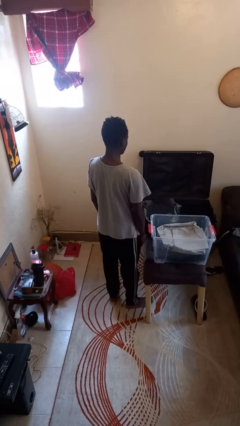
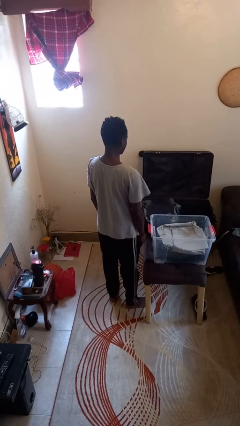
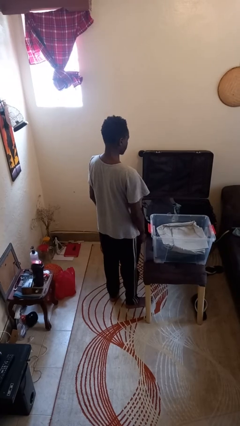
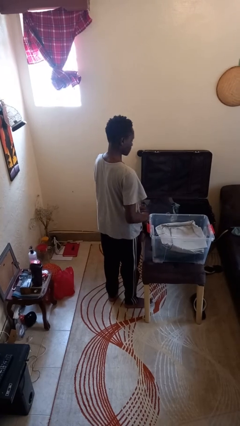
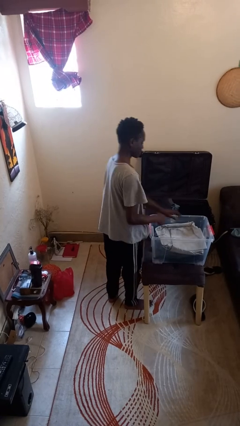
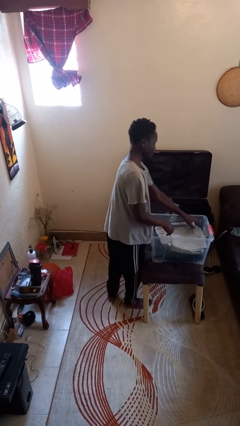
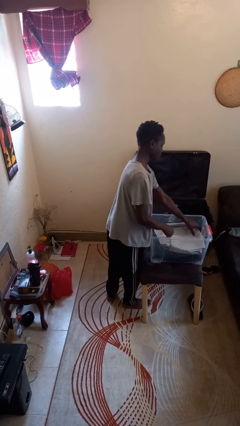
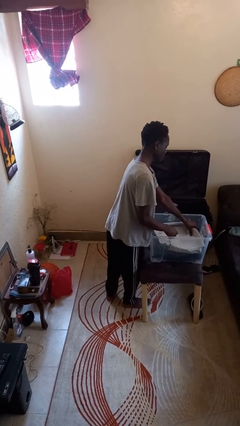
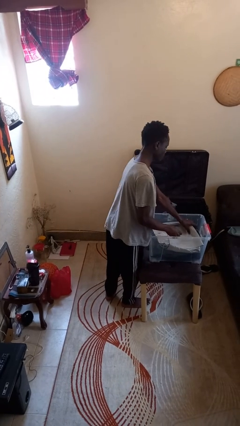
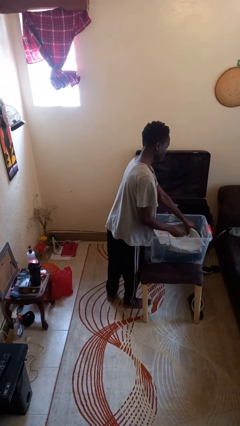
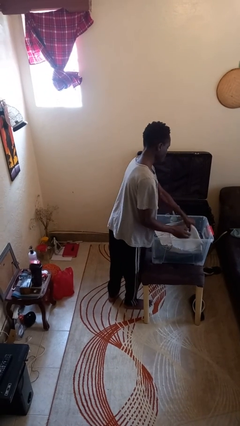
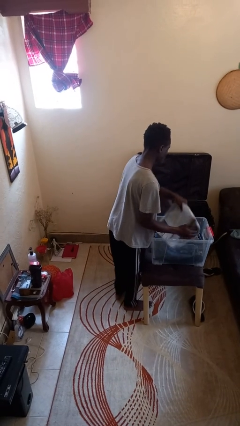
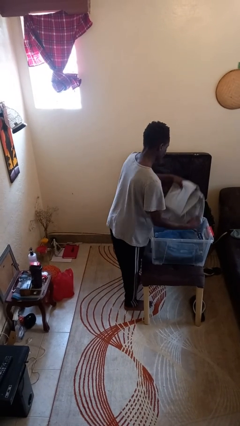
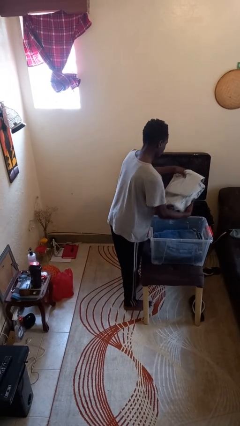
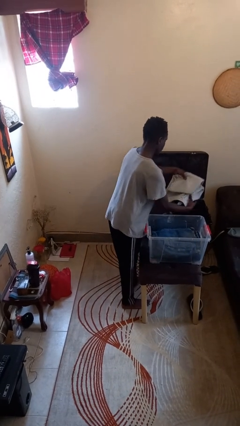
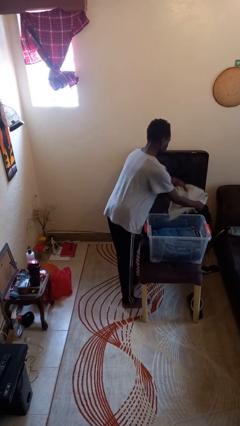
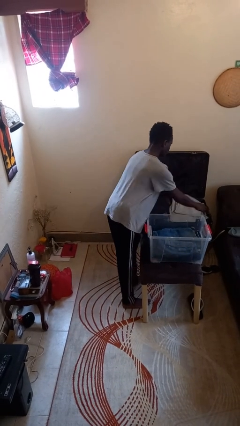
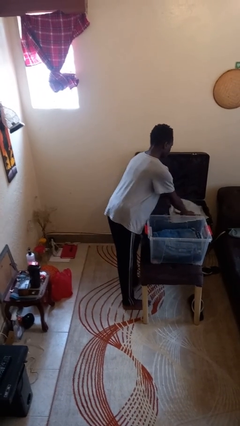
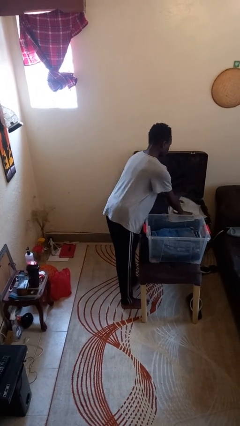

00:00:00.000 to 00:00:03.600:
person loads clothes into suitcase

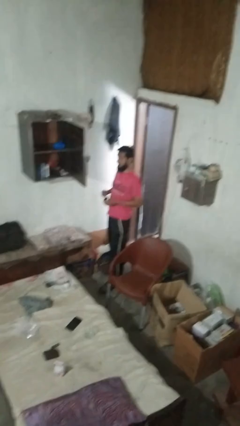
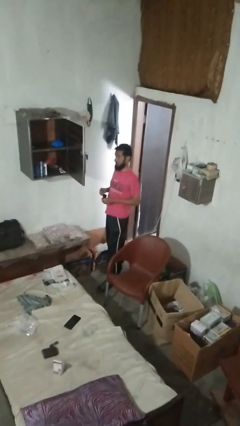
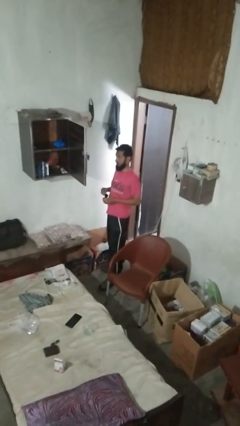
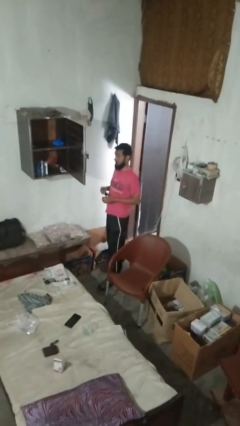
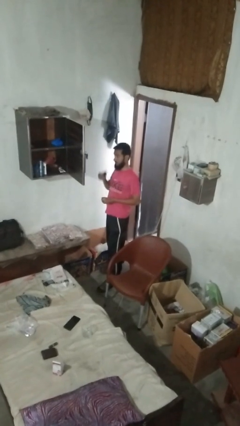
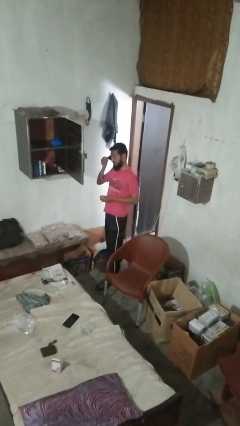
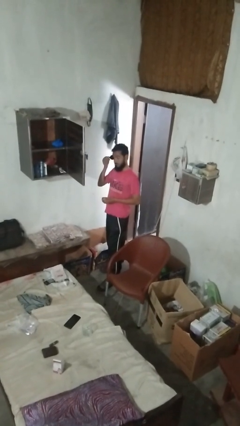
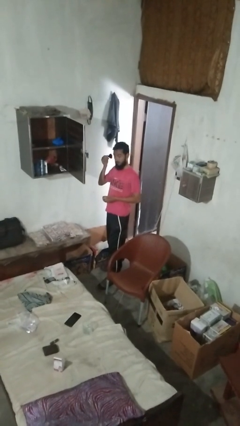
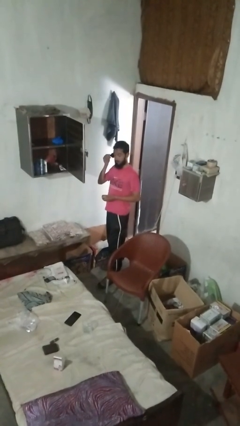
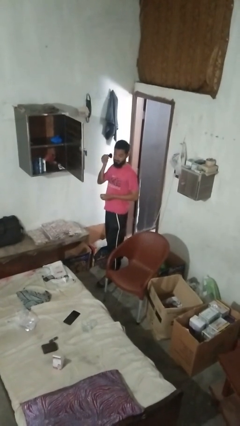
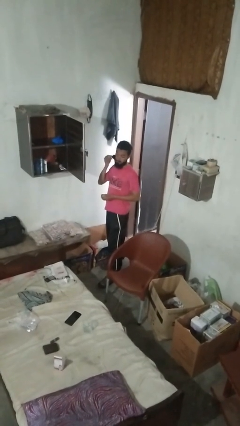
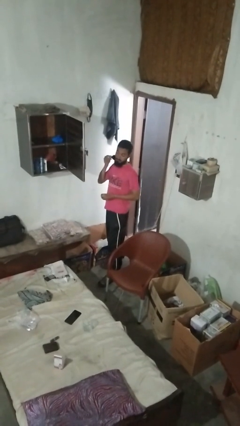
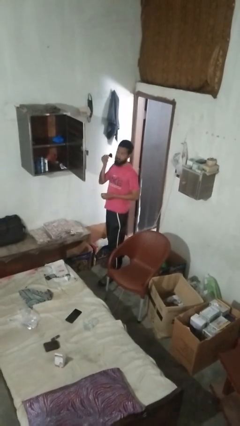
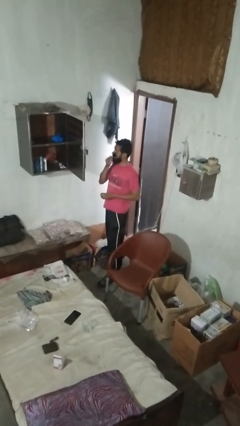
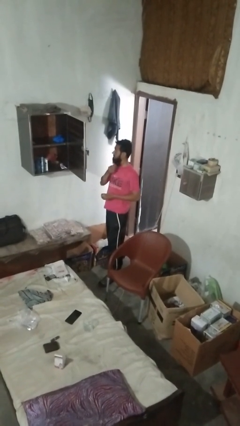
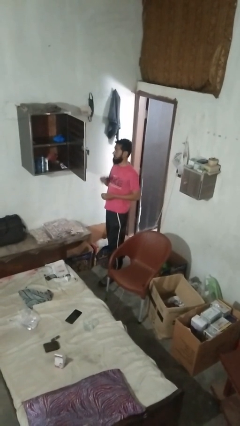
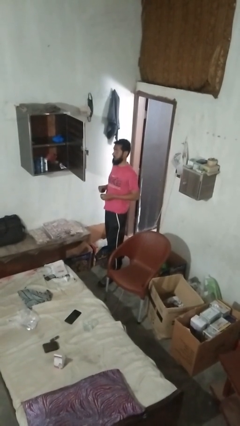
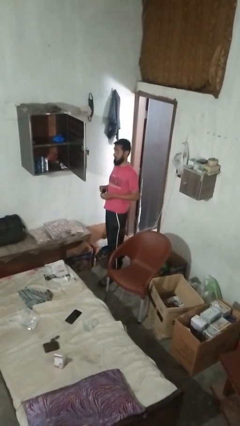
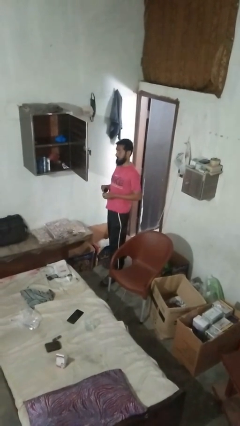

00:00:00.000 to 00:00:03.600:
person applies foundation makeup

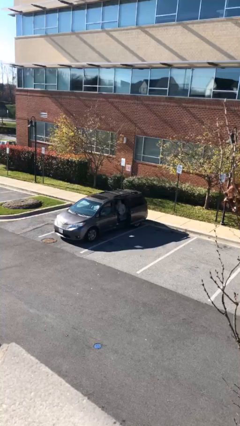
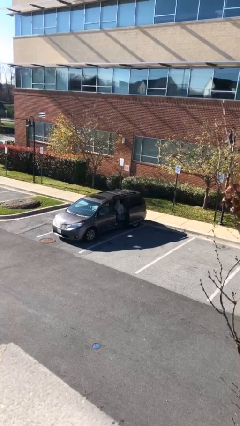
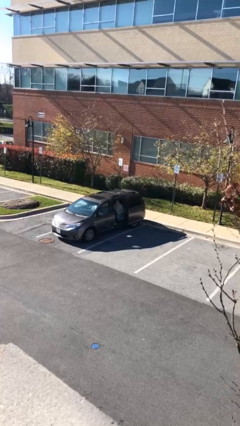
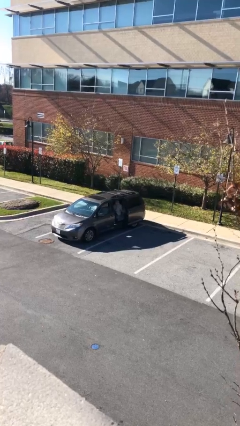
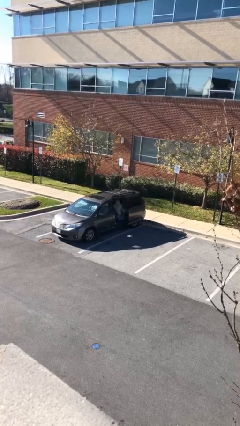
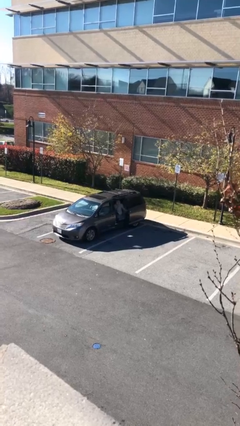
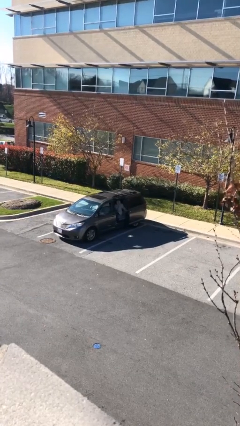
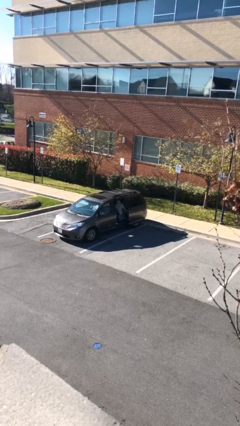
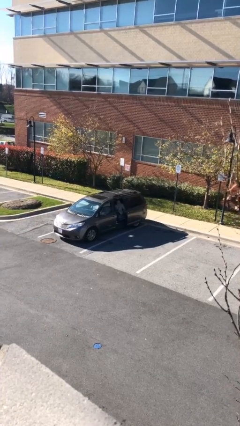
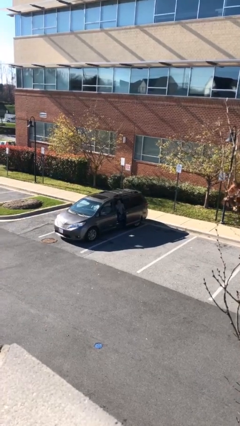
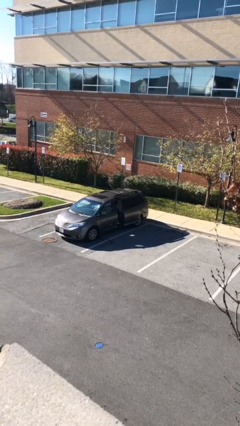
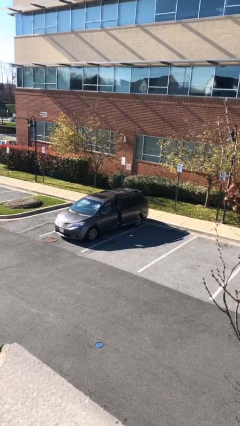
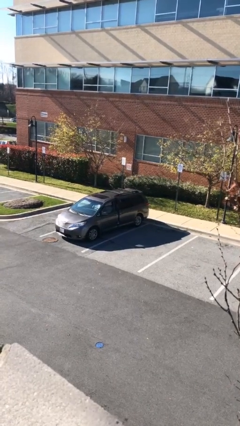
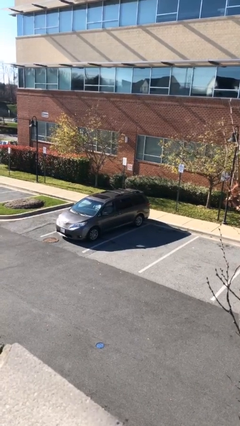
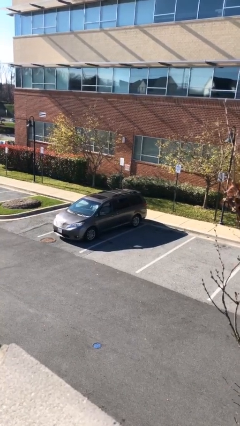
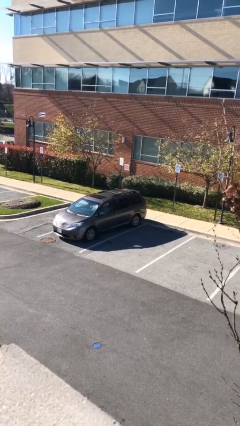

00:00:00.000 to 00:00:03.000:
person closes car door

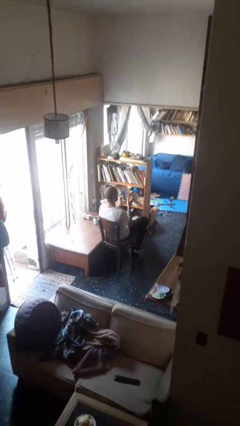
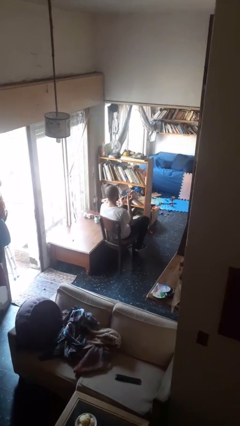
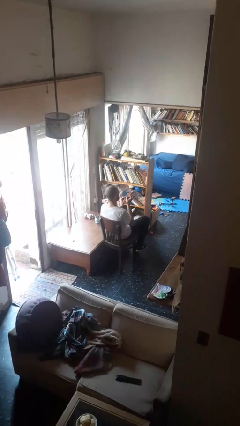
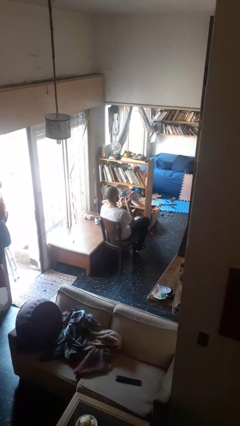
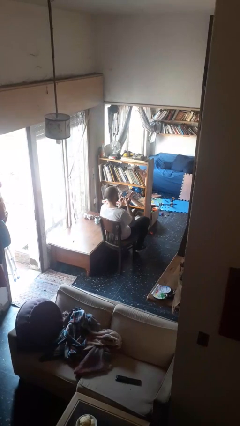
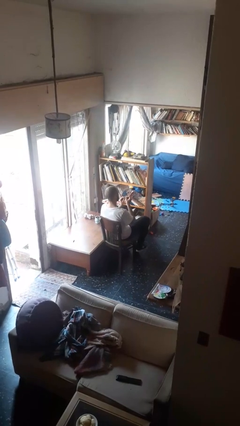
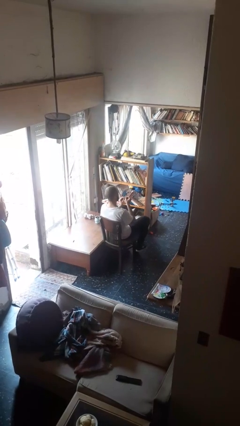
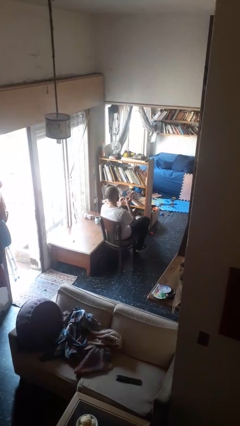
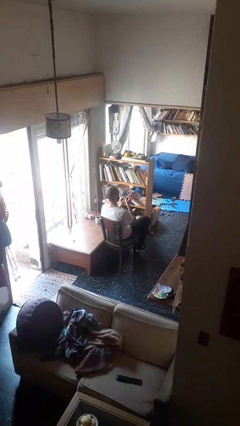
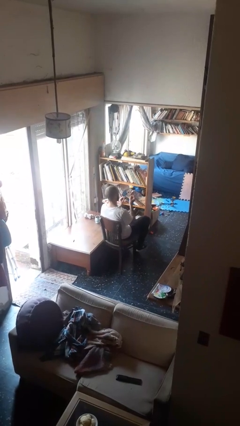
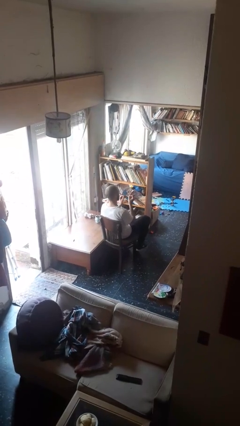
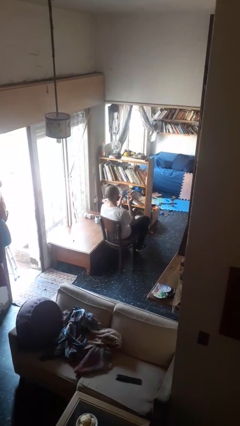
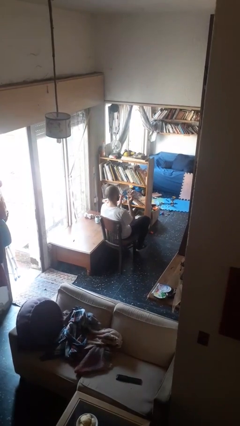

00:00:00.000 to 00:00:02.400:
person files fingernails

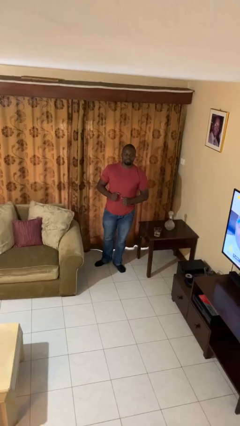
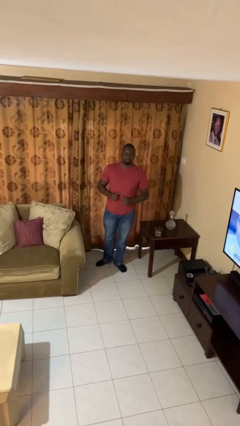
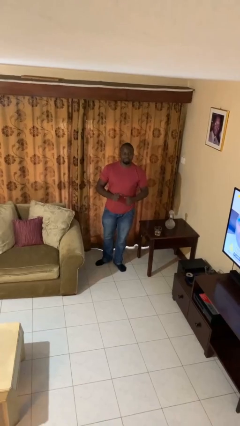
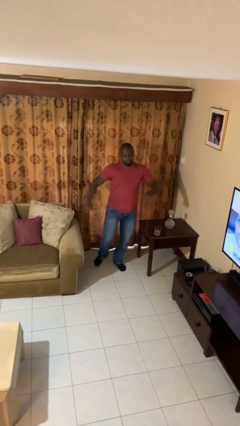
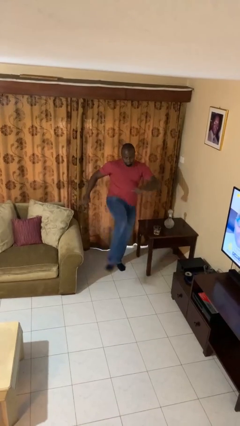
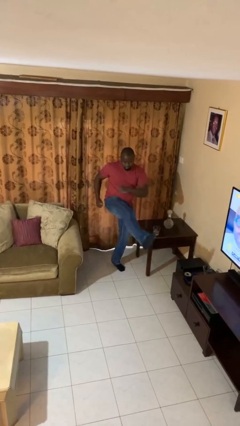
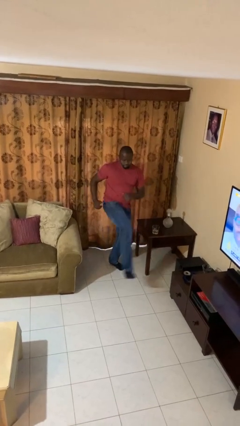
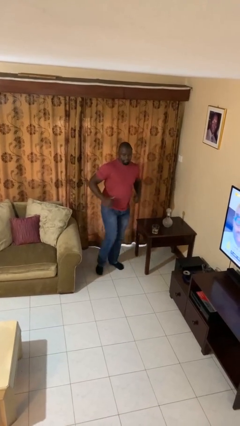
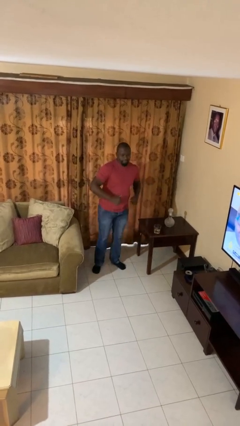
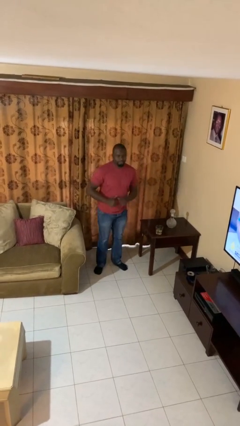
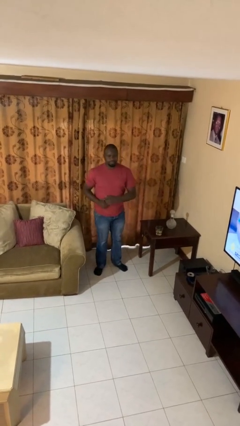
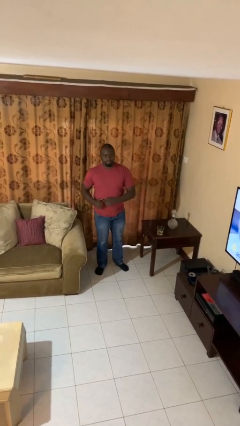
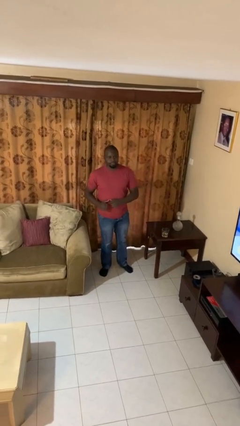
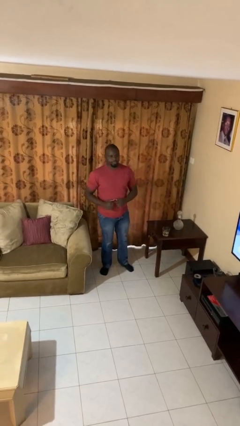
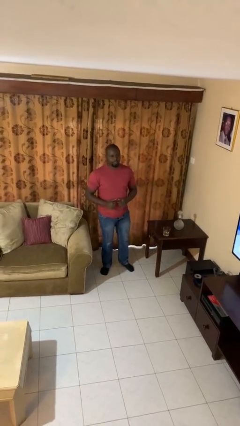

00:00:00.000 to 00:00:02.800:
person karate kicks

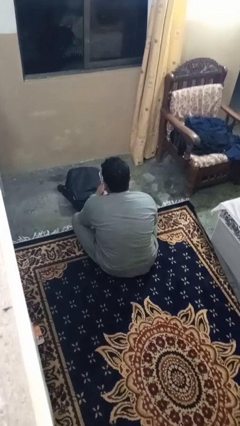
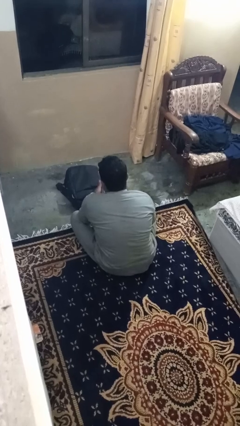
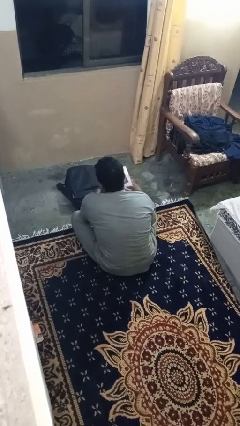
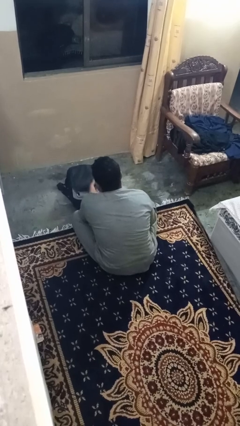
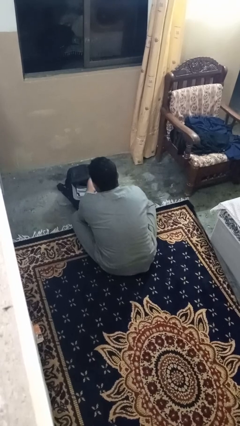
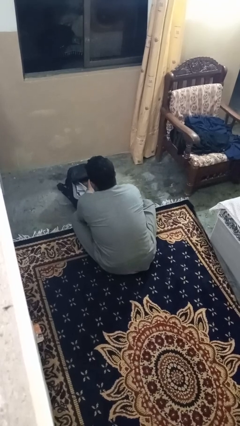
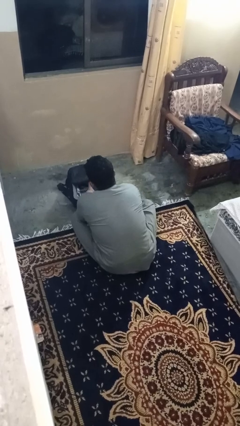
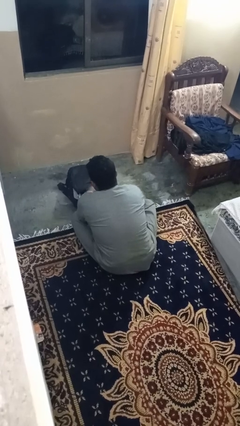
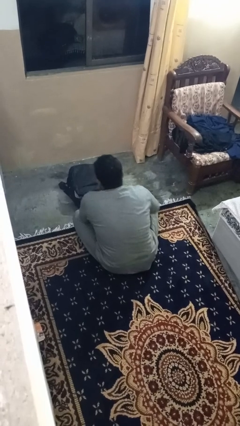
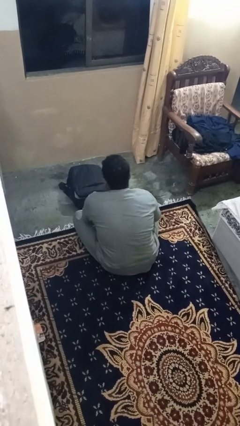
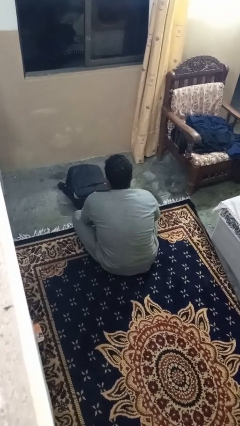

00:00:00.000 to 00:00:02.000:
person puts object into bag

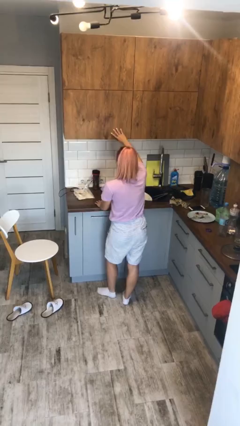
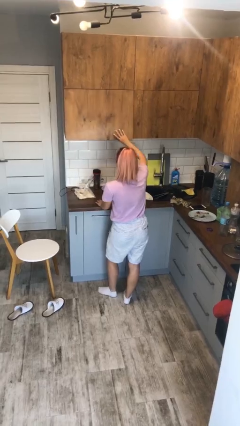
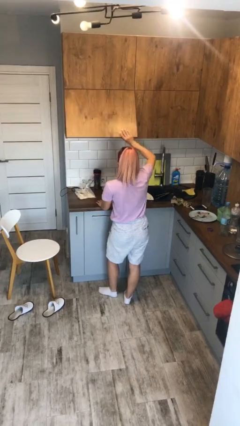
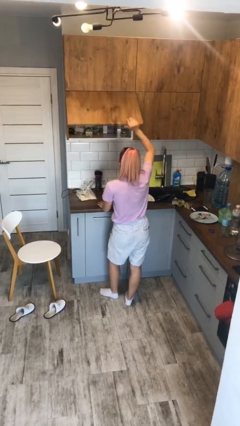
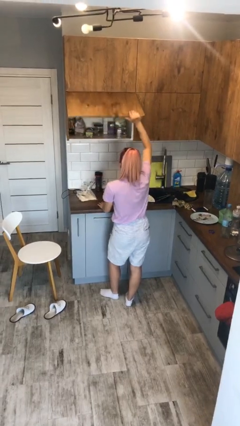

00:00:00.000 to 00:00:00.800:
person closes cabinet
